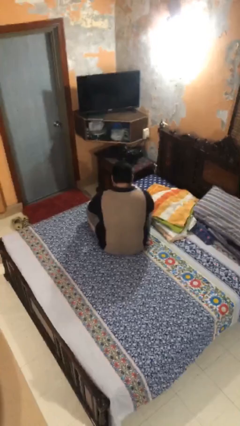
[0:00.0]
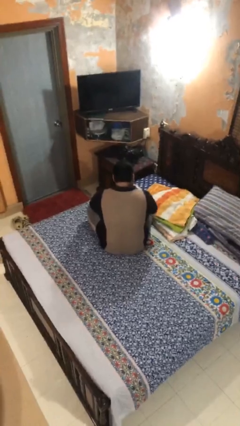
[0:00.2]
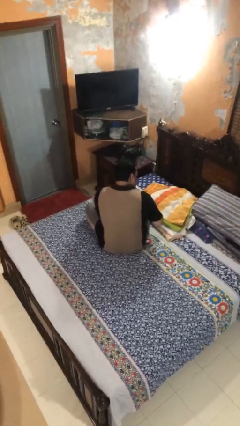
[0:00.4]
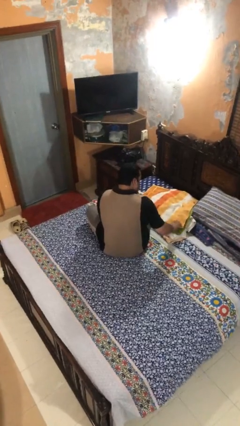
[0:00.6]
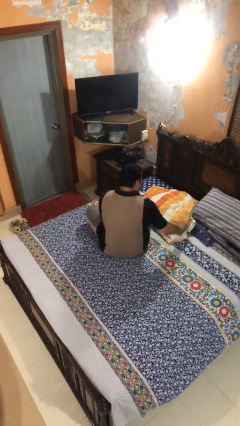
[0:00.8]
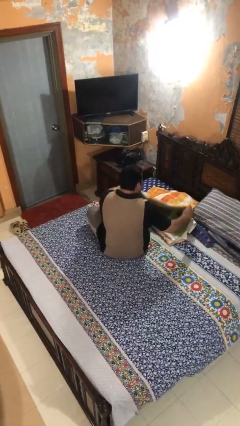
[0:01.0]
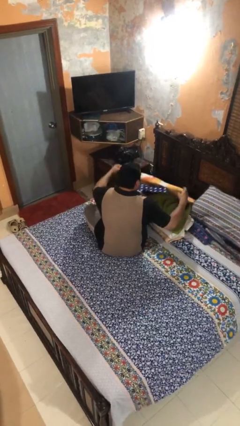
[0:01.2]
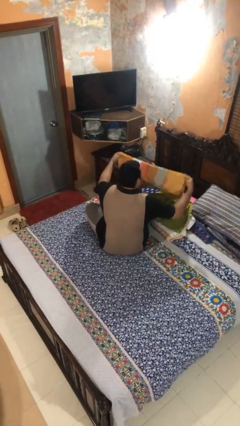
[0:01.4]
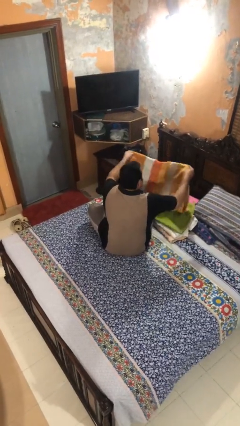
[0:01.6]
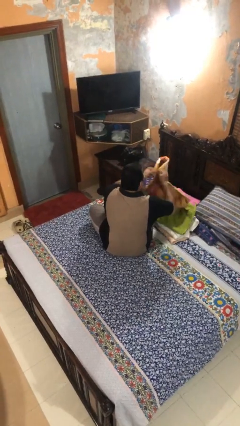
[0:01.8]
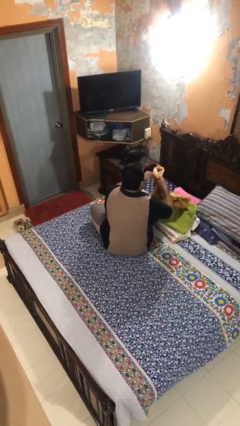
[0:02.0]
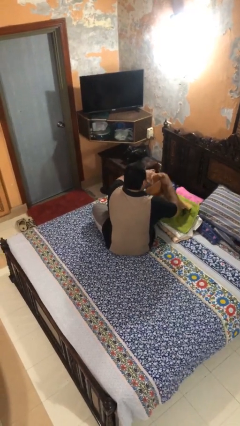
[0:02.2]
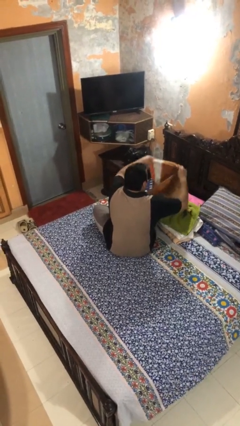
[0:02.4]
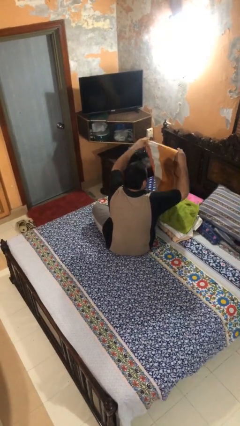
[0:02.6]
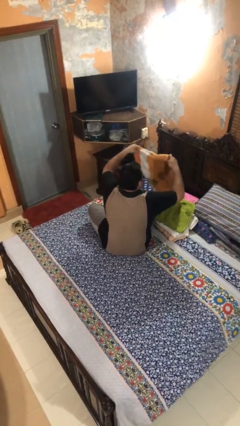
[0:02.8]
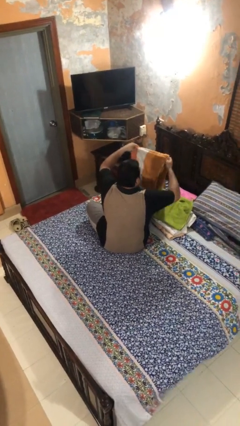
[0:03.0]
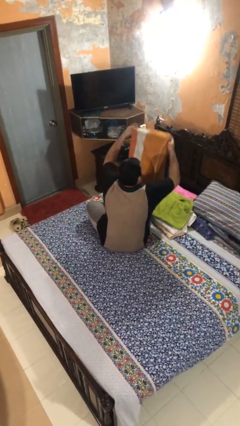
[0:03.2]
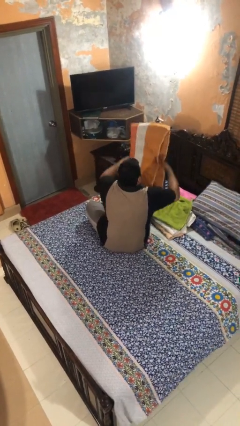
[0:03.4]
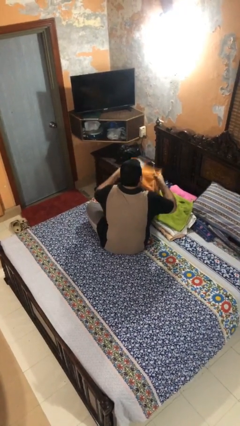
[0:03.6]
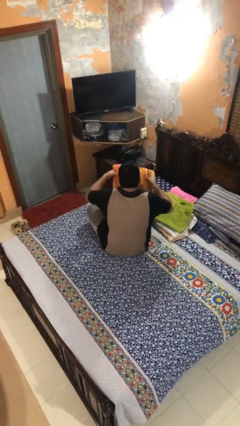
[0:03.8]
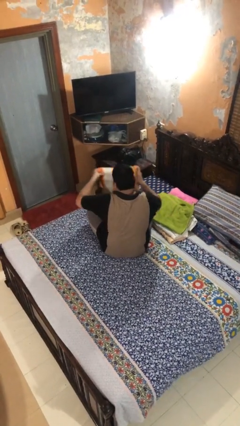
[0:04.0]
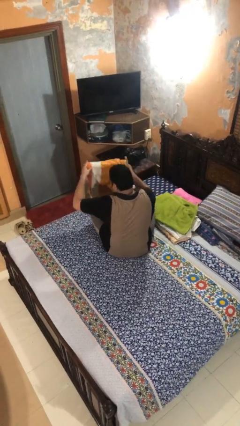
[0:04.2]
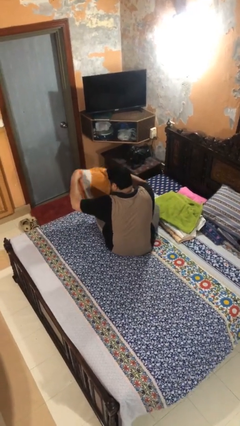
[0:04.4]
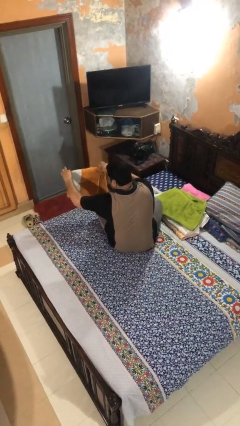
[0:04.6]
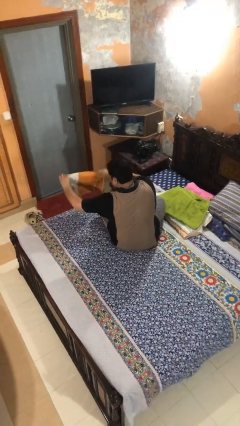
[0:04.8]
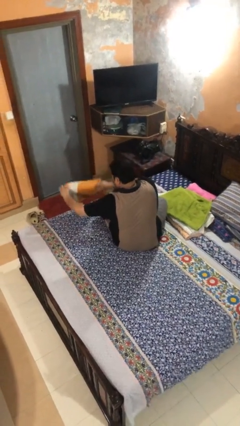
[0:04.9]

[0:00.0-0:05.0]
person folds towel

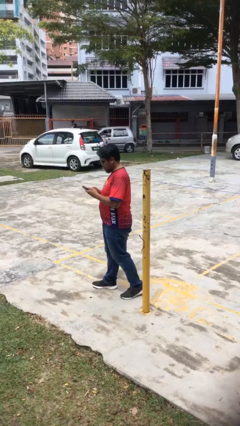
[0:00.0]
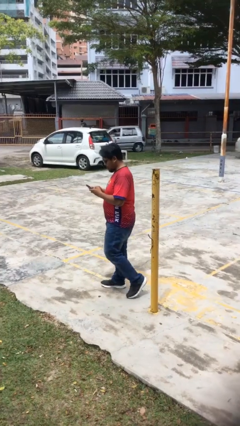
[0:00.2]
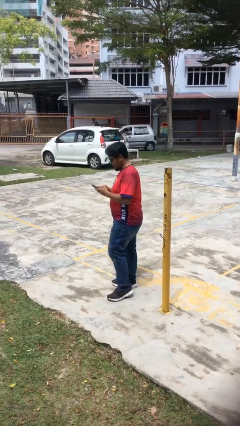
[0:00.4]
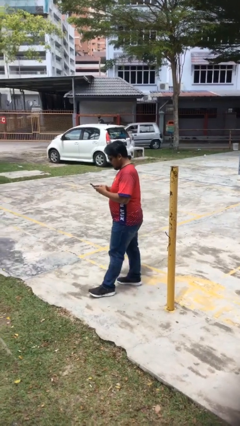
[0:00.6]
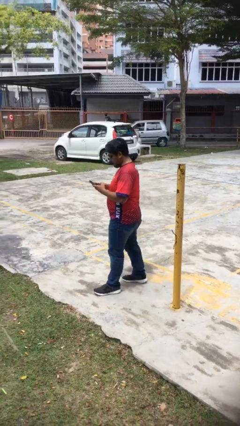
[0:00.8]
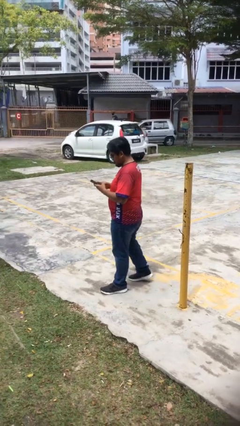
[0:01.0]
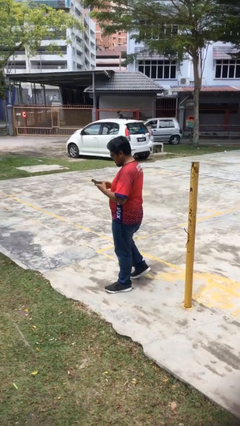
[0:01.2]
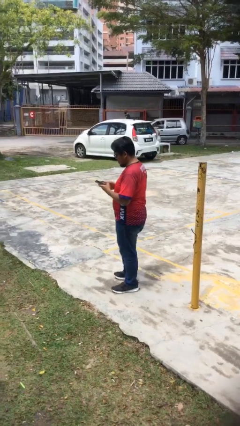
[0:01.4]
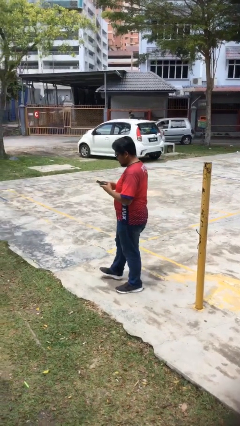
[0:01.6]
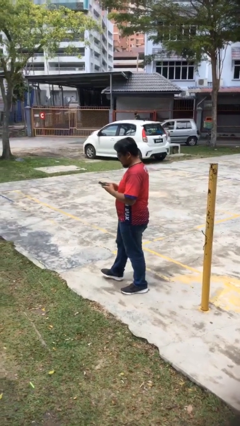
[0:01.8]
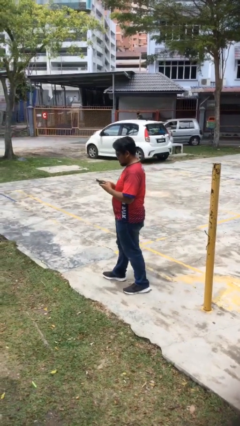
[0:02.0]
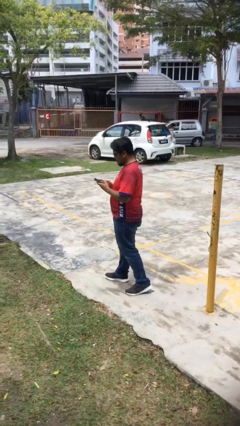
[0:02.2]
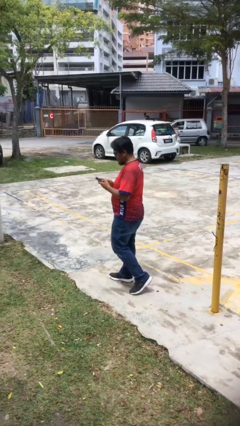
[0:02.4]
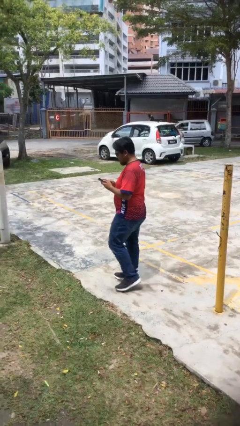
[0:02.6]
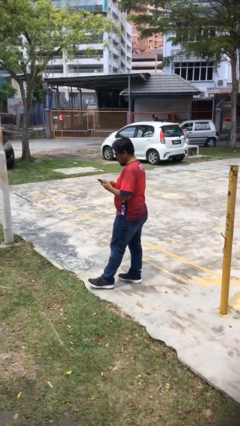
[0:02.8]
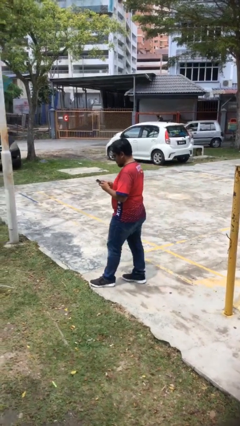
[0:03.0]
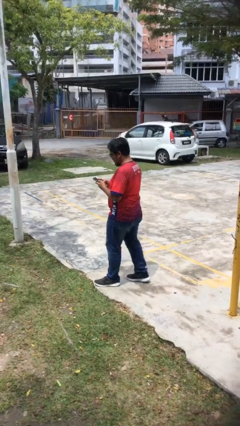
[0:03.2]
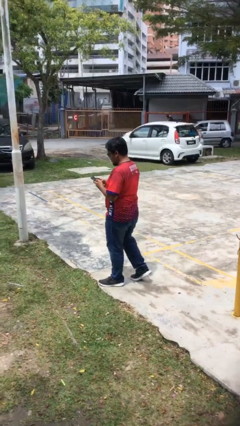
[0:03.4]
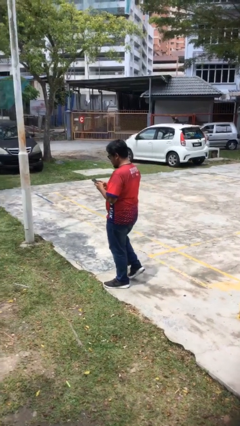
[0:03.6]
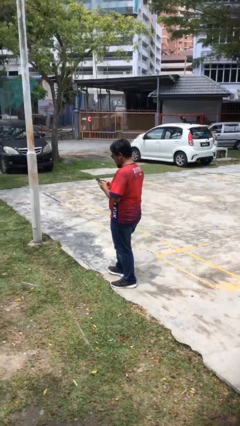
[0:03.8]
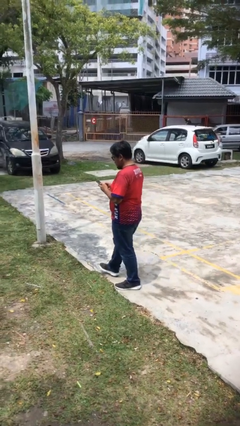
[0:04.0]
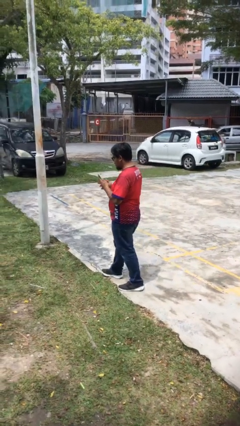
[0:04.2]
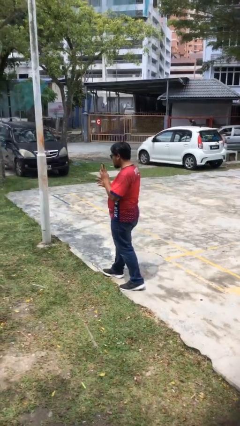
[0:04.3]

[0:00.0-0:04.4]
person texts on phone

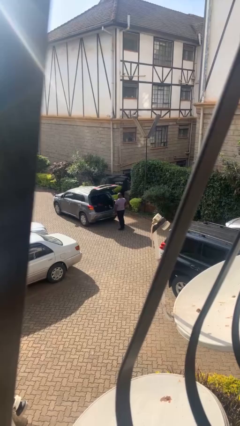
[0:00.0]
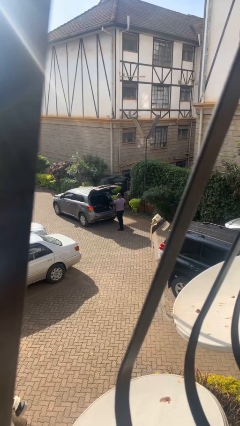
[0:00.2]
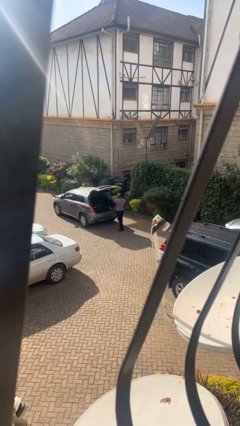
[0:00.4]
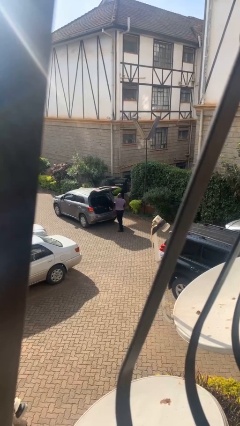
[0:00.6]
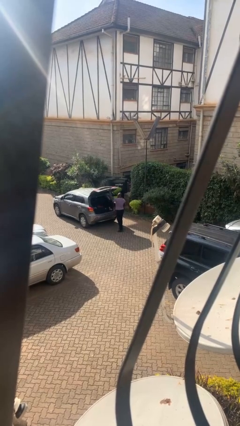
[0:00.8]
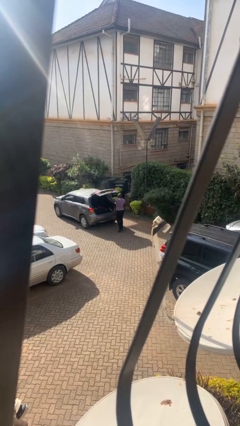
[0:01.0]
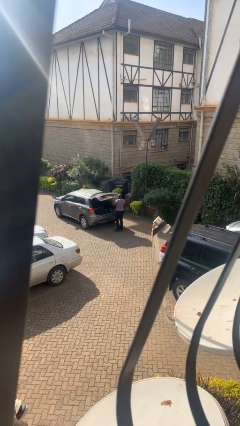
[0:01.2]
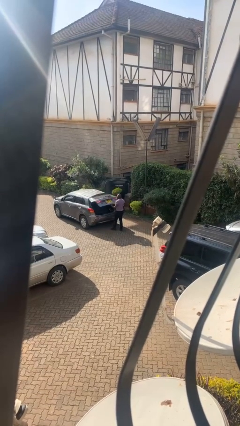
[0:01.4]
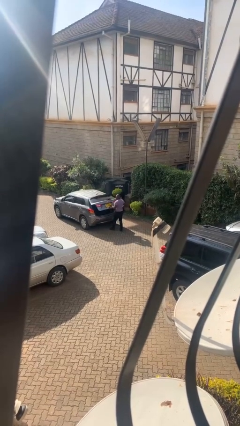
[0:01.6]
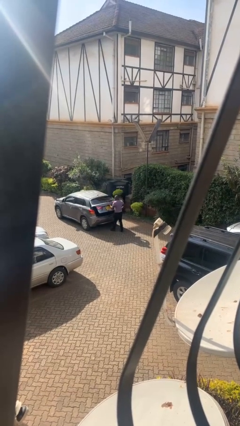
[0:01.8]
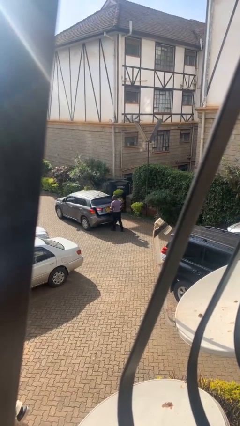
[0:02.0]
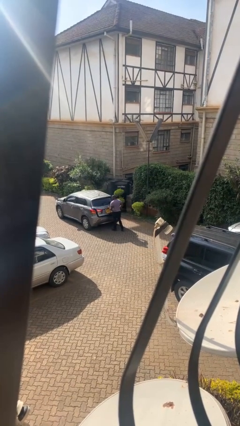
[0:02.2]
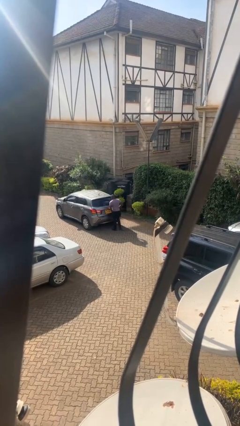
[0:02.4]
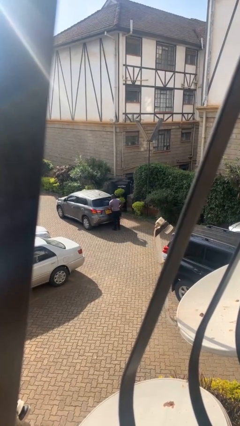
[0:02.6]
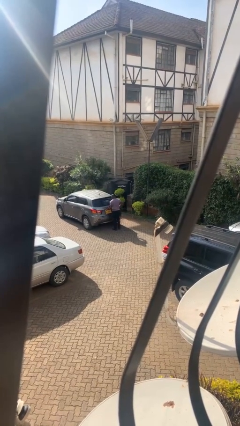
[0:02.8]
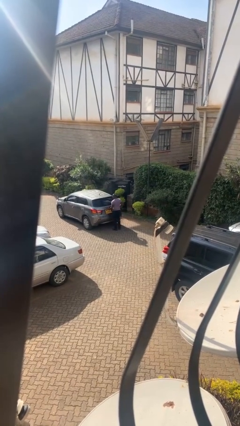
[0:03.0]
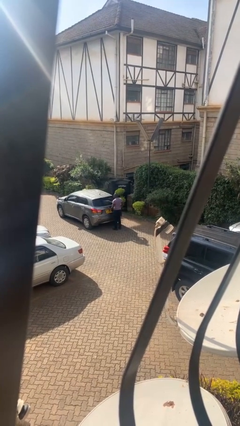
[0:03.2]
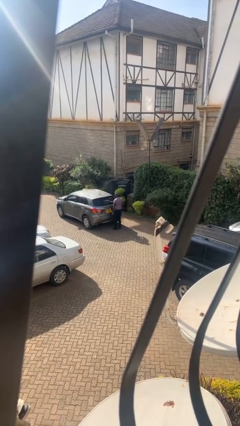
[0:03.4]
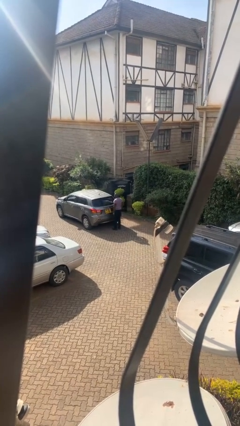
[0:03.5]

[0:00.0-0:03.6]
person closes car trunk

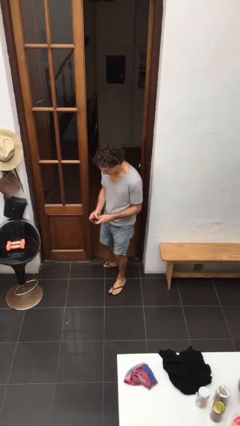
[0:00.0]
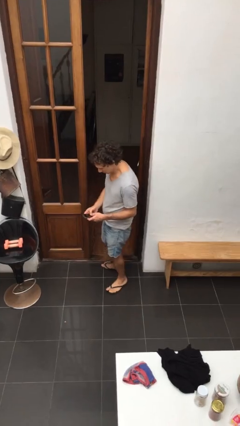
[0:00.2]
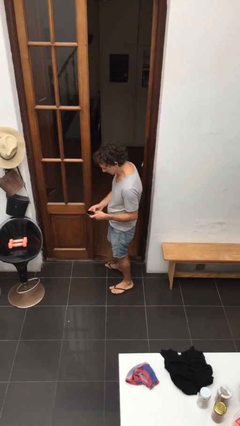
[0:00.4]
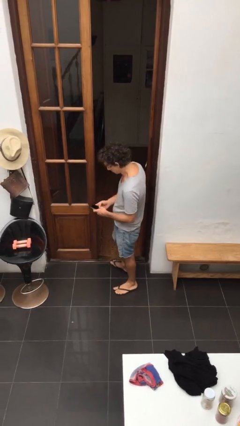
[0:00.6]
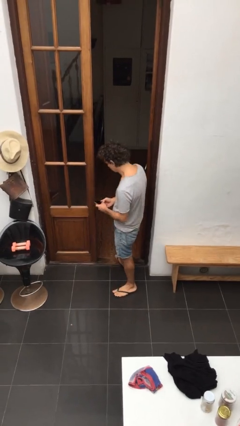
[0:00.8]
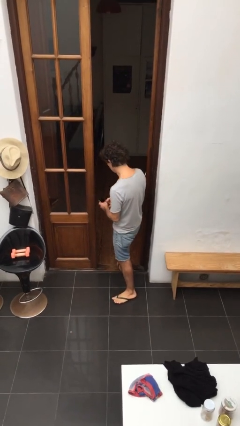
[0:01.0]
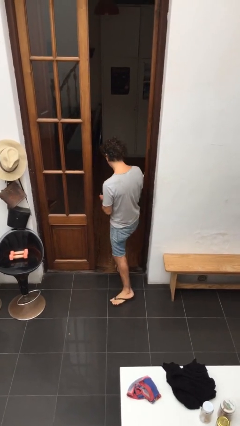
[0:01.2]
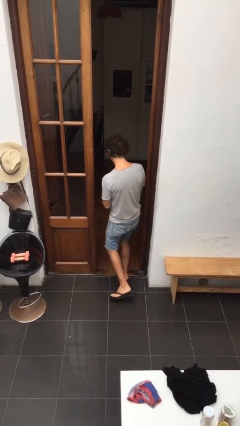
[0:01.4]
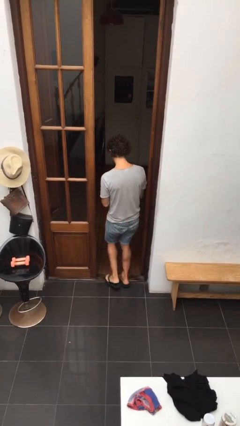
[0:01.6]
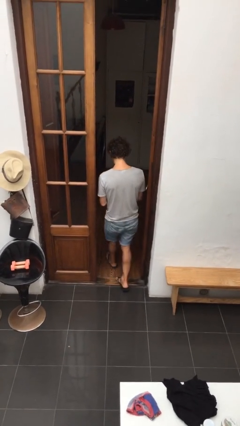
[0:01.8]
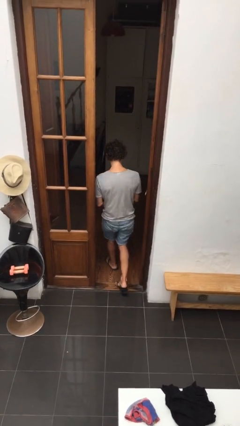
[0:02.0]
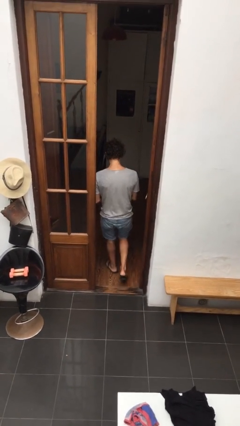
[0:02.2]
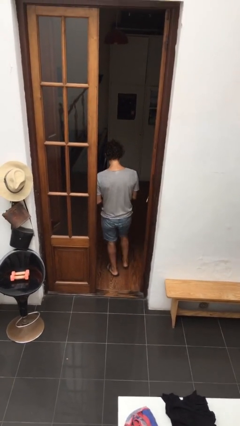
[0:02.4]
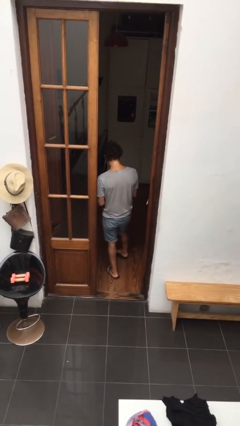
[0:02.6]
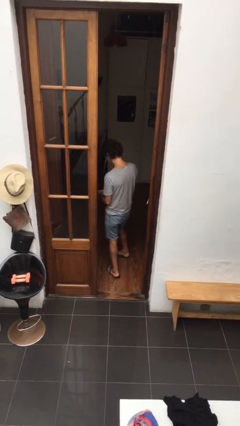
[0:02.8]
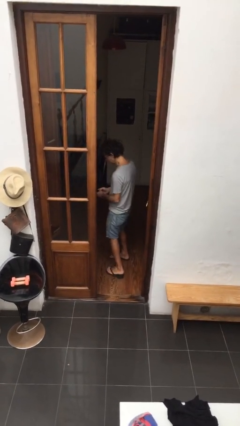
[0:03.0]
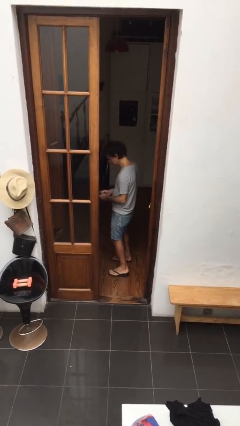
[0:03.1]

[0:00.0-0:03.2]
person exits scene through structure

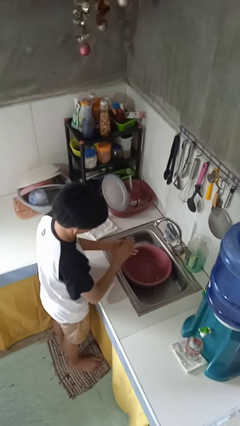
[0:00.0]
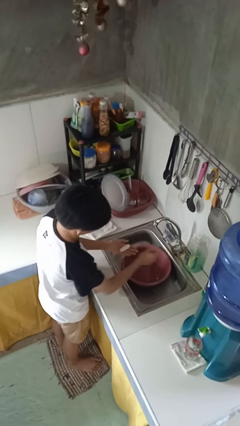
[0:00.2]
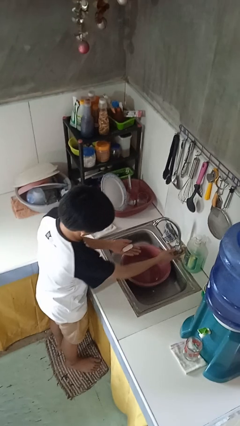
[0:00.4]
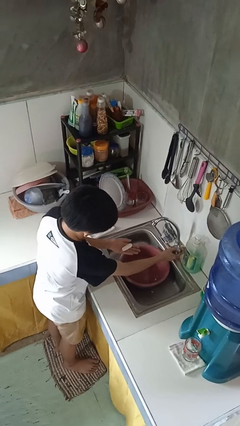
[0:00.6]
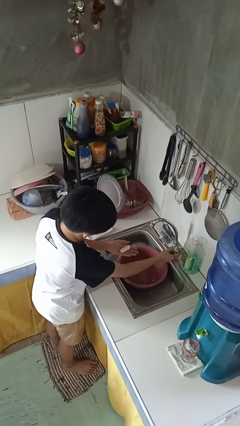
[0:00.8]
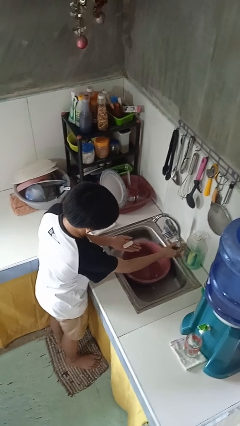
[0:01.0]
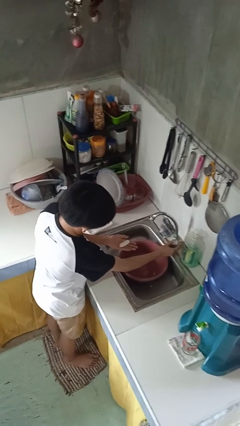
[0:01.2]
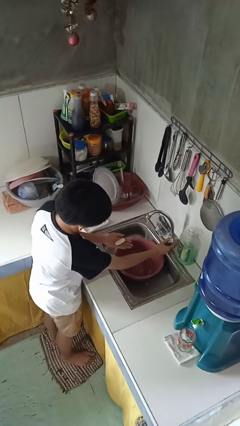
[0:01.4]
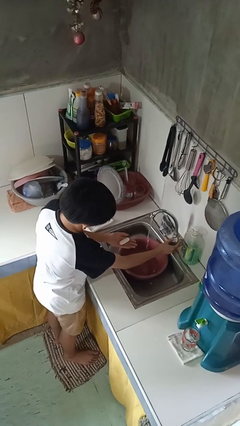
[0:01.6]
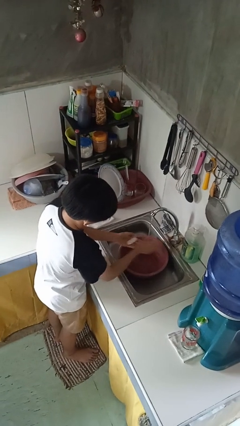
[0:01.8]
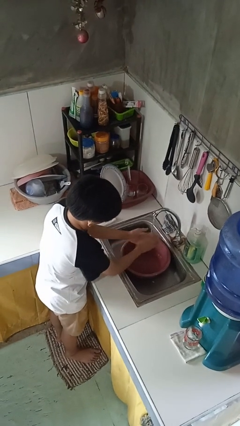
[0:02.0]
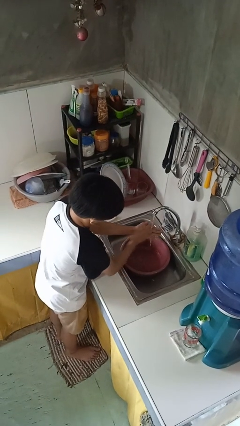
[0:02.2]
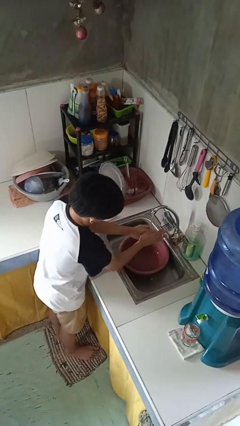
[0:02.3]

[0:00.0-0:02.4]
person washes hands
